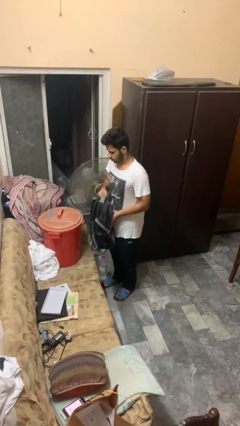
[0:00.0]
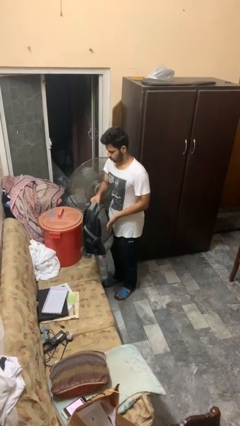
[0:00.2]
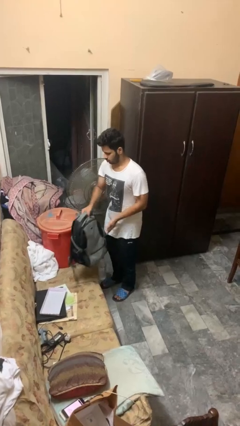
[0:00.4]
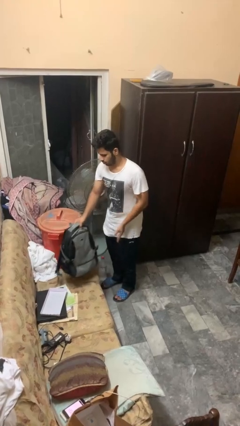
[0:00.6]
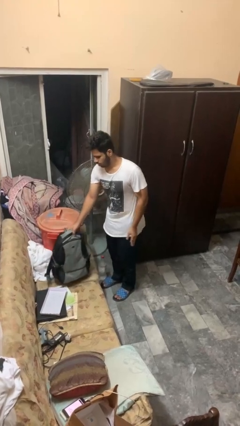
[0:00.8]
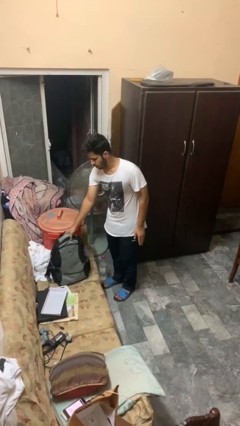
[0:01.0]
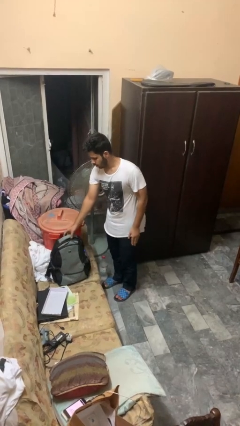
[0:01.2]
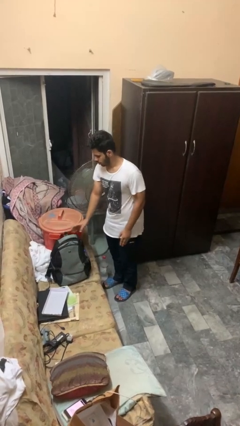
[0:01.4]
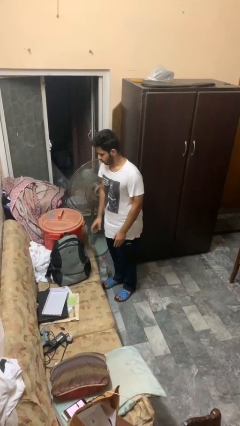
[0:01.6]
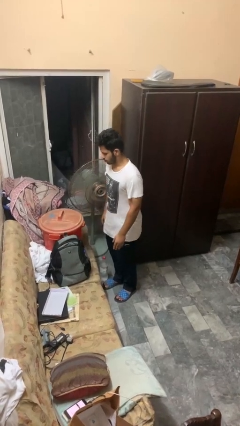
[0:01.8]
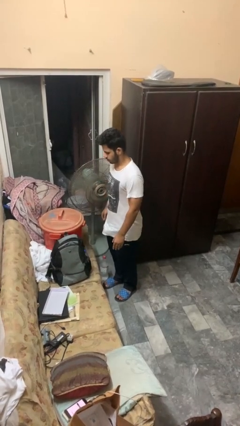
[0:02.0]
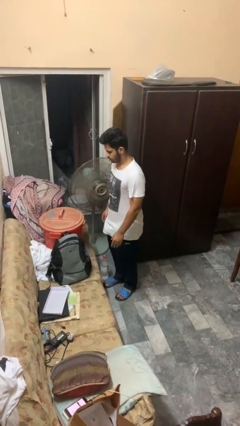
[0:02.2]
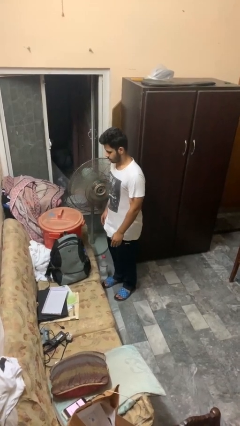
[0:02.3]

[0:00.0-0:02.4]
person puts down object on couch

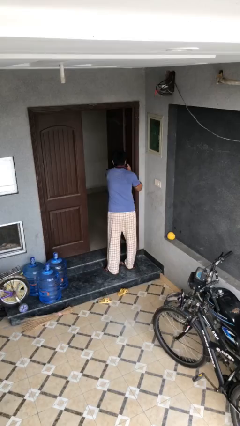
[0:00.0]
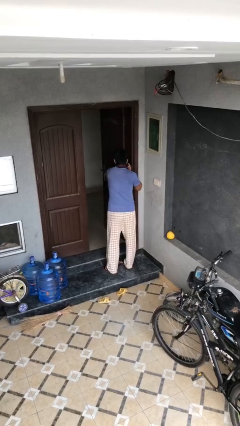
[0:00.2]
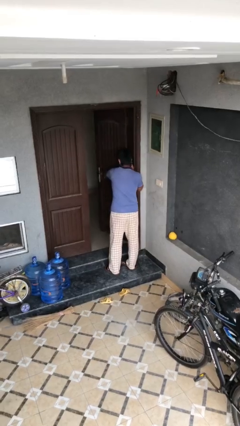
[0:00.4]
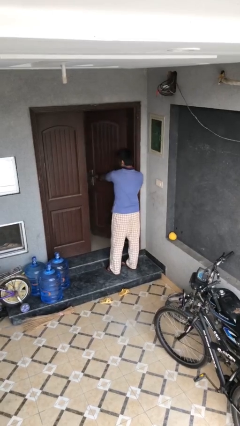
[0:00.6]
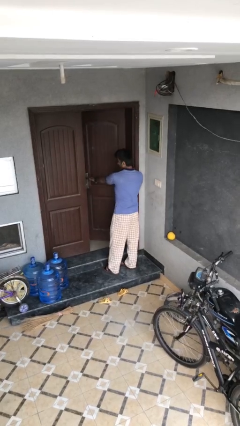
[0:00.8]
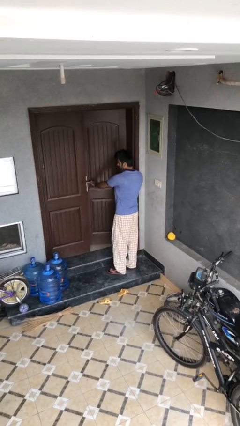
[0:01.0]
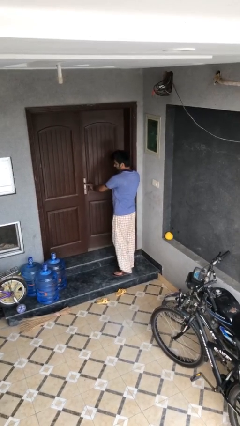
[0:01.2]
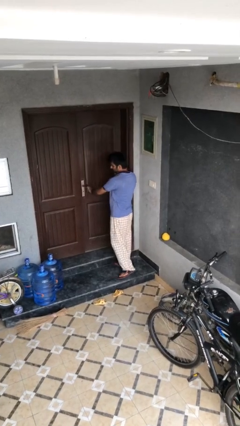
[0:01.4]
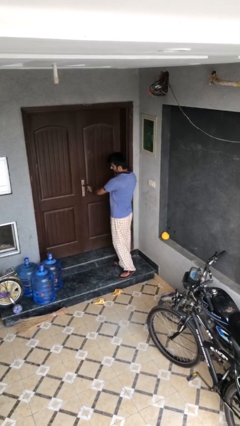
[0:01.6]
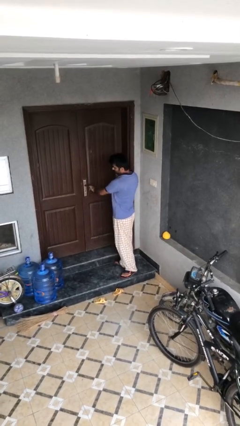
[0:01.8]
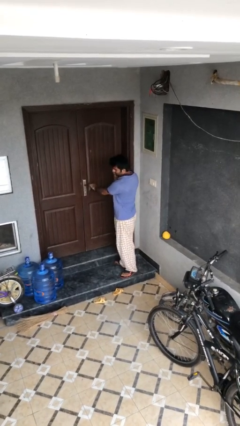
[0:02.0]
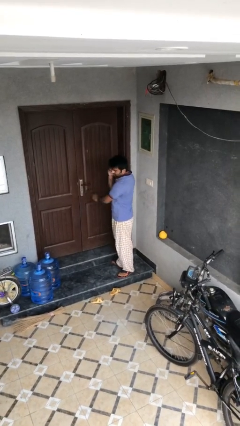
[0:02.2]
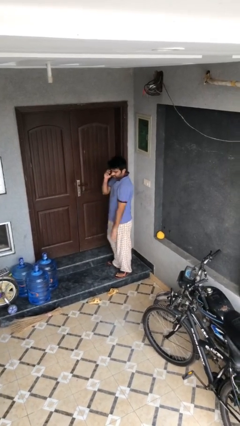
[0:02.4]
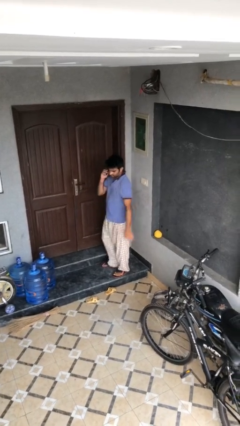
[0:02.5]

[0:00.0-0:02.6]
person closes facility door

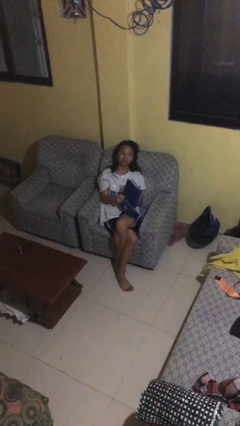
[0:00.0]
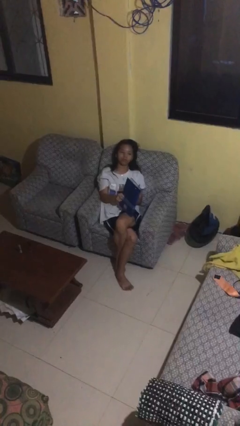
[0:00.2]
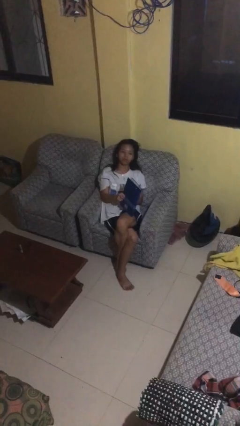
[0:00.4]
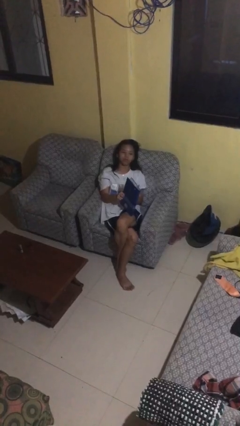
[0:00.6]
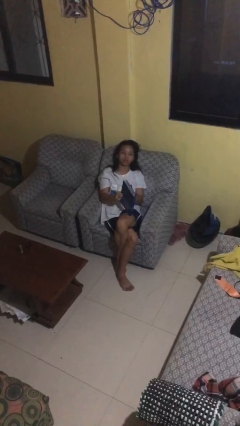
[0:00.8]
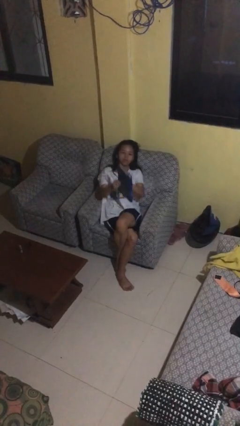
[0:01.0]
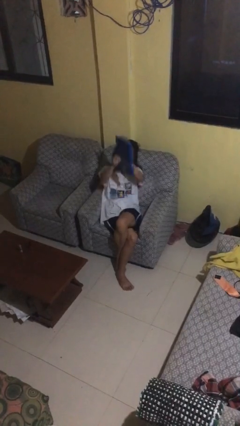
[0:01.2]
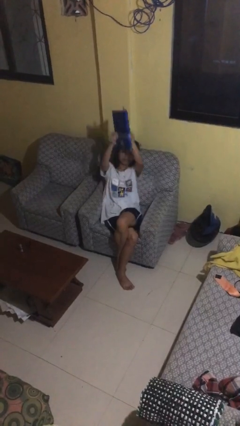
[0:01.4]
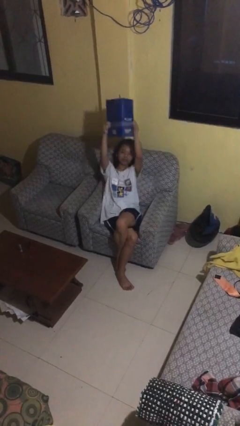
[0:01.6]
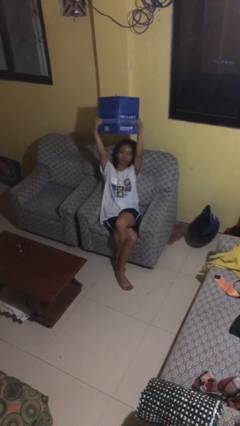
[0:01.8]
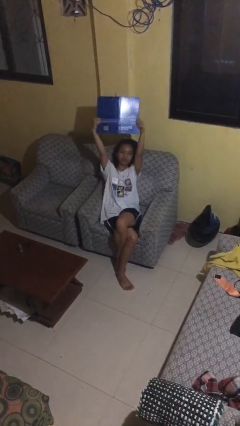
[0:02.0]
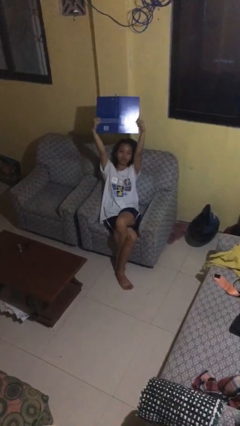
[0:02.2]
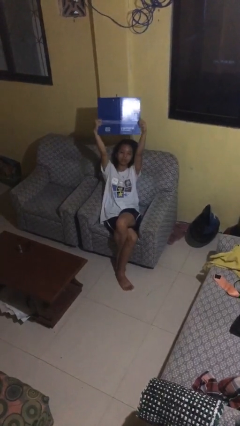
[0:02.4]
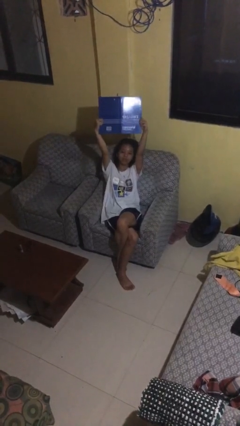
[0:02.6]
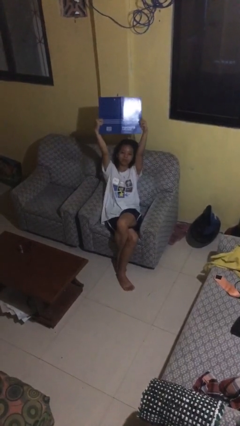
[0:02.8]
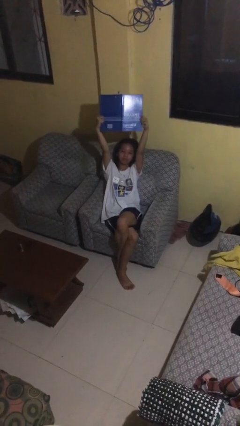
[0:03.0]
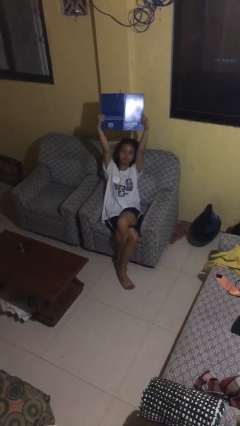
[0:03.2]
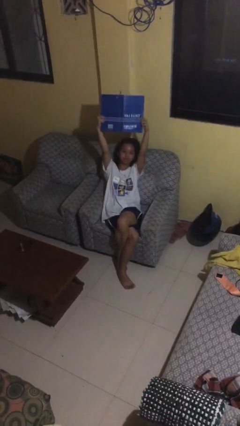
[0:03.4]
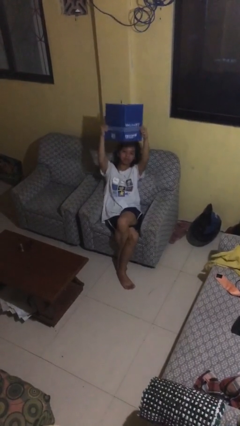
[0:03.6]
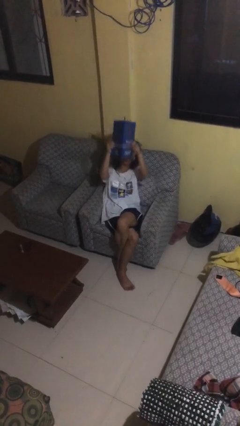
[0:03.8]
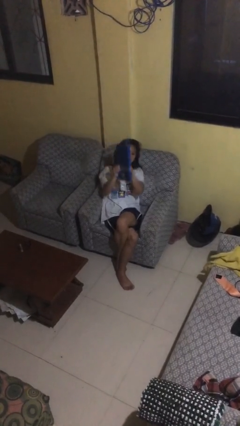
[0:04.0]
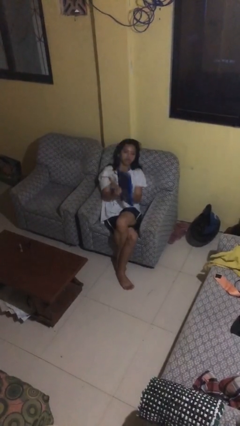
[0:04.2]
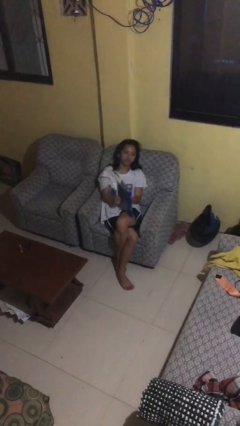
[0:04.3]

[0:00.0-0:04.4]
person holds object above head

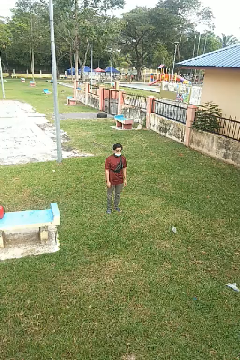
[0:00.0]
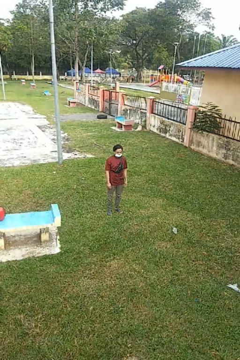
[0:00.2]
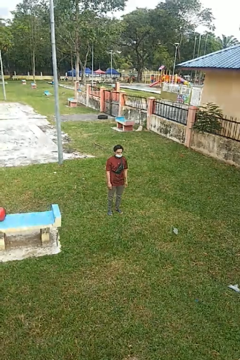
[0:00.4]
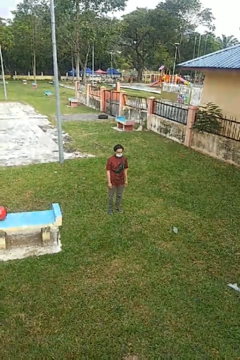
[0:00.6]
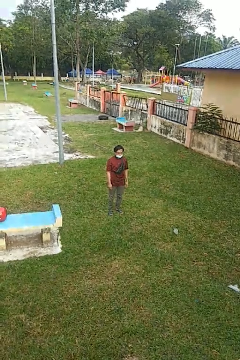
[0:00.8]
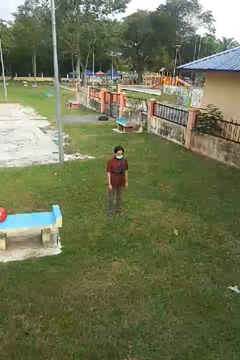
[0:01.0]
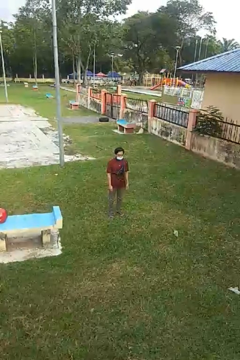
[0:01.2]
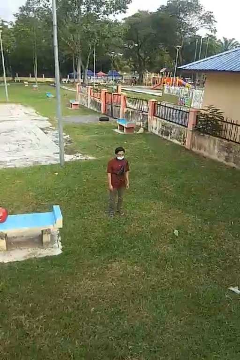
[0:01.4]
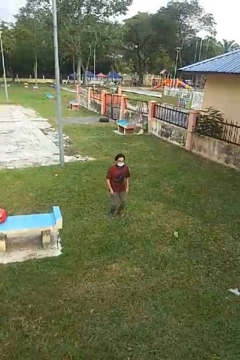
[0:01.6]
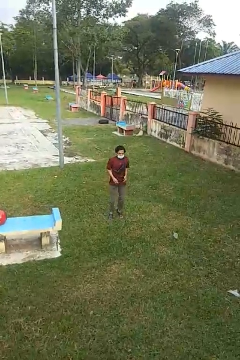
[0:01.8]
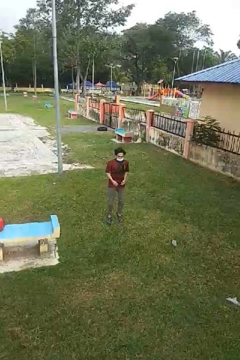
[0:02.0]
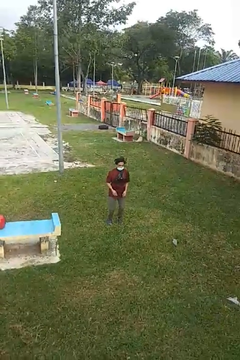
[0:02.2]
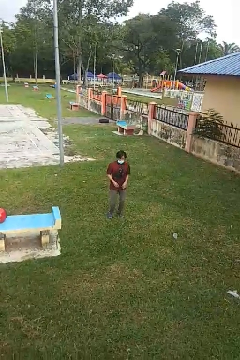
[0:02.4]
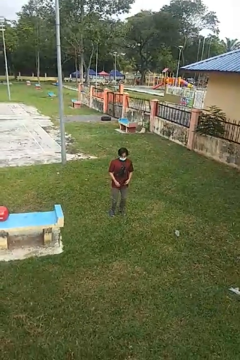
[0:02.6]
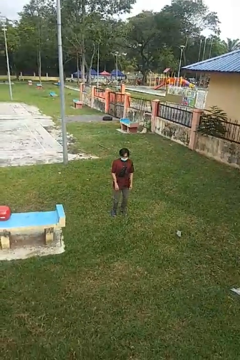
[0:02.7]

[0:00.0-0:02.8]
person jumps

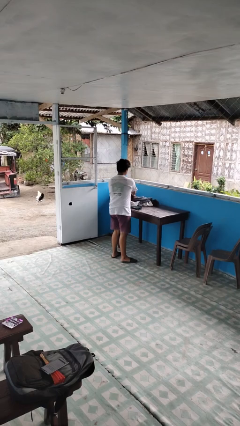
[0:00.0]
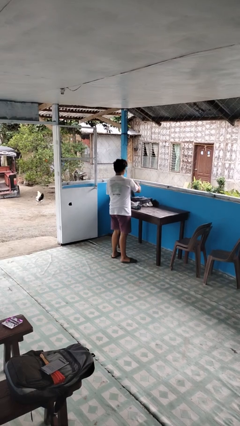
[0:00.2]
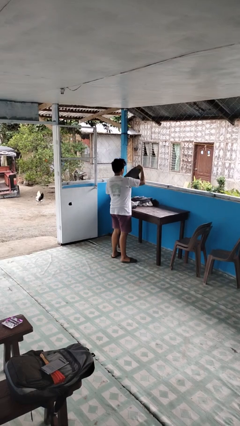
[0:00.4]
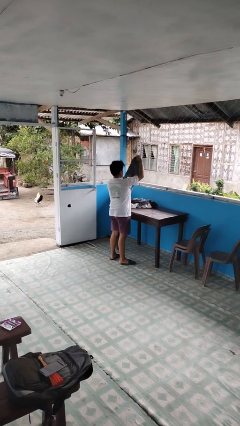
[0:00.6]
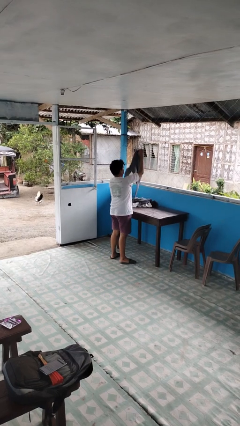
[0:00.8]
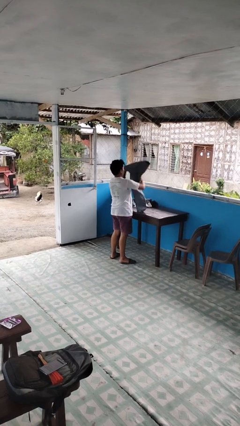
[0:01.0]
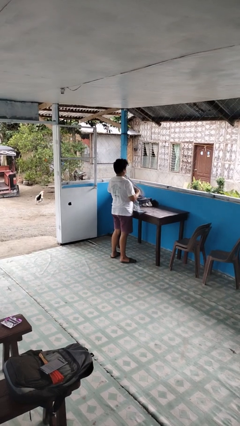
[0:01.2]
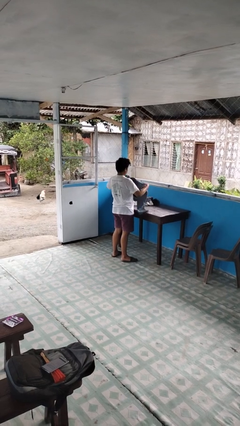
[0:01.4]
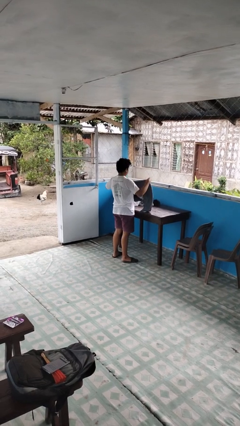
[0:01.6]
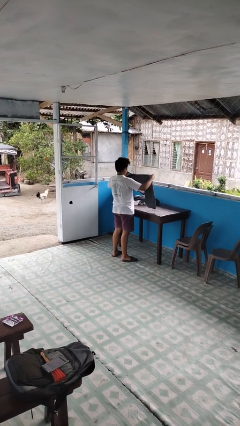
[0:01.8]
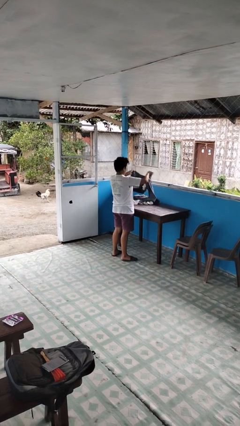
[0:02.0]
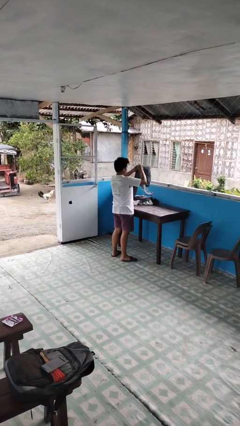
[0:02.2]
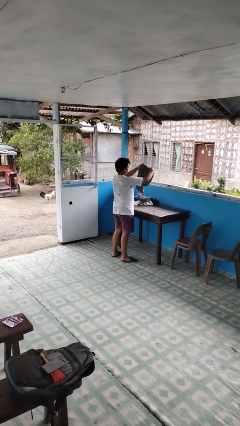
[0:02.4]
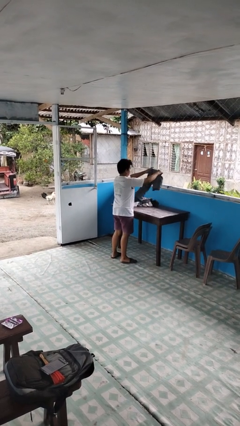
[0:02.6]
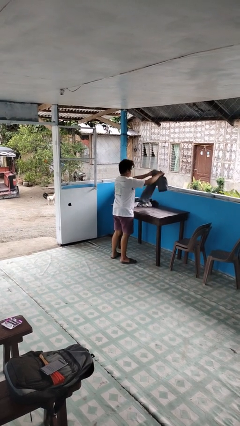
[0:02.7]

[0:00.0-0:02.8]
person folds pants

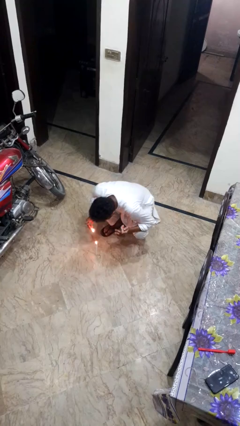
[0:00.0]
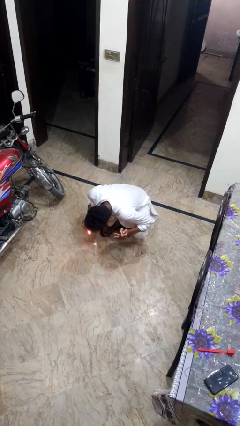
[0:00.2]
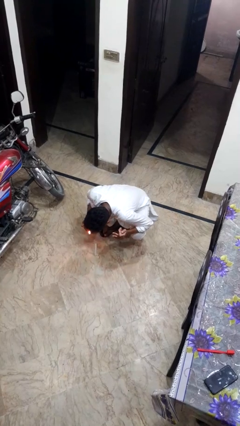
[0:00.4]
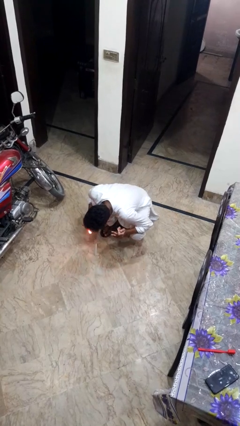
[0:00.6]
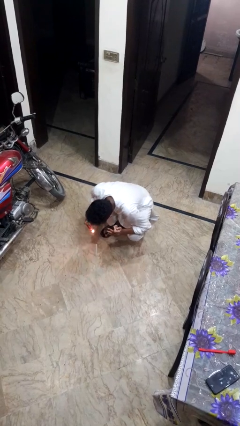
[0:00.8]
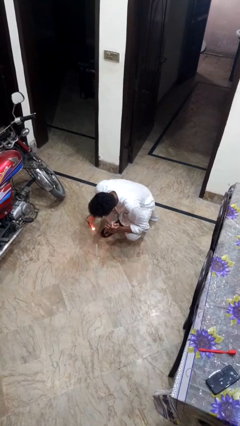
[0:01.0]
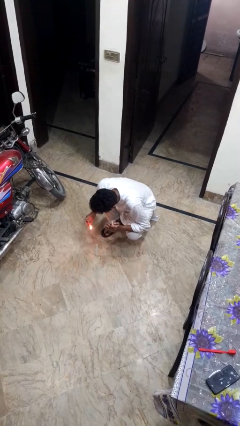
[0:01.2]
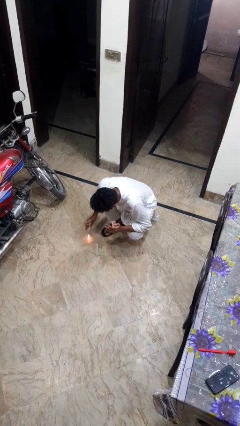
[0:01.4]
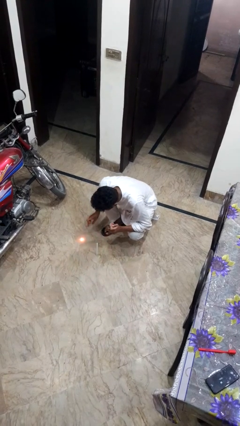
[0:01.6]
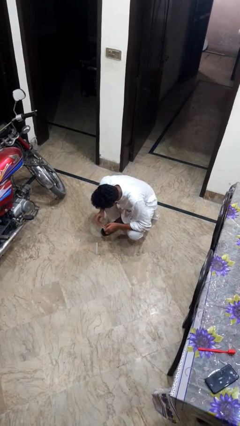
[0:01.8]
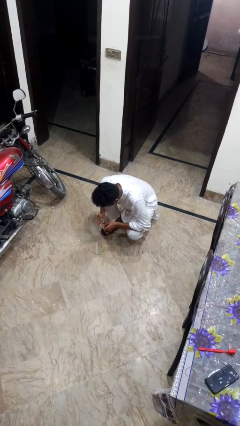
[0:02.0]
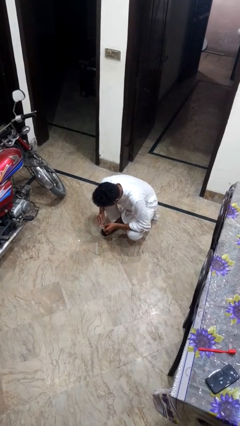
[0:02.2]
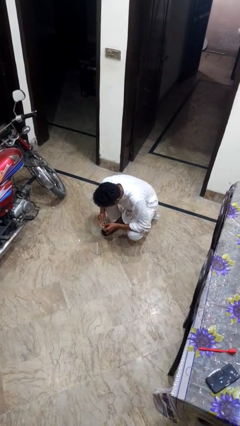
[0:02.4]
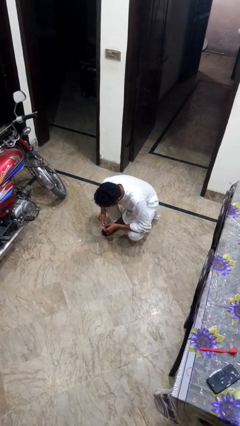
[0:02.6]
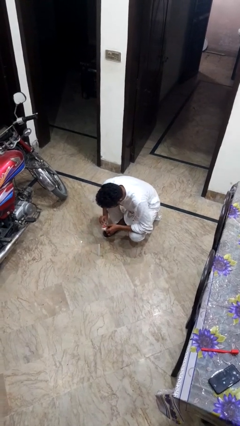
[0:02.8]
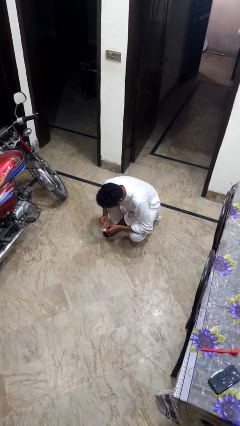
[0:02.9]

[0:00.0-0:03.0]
person extinguishes candle
